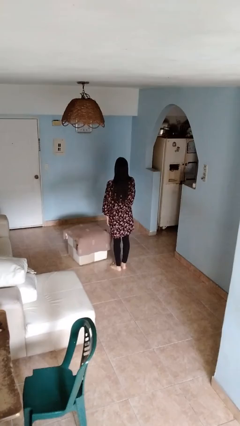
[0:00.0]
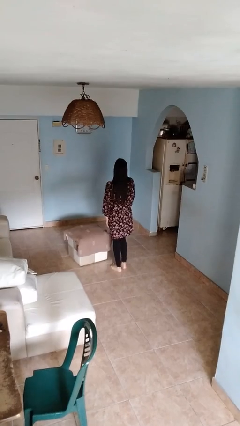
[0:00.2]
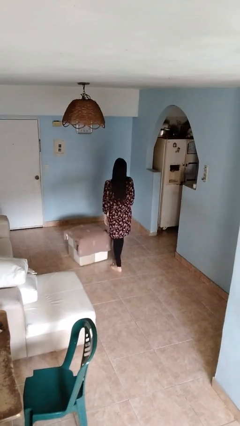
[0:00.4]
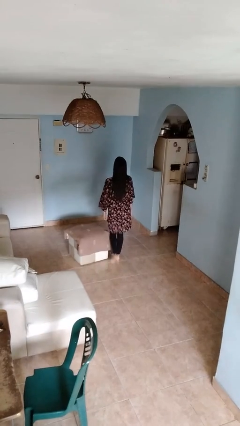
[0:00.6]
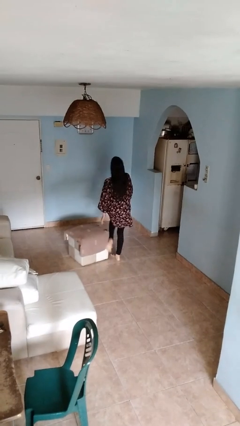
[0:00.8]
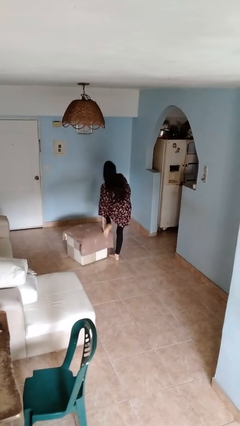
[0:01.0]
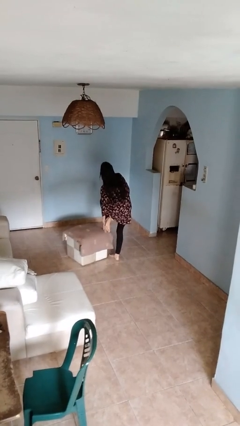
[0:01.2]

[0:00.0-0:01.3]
person stubs toe

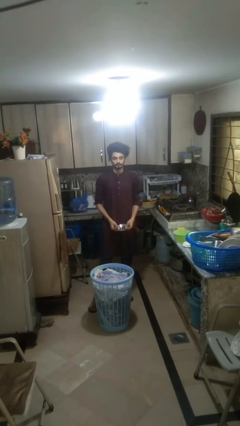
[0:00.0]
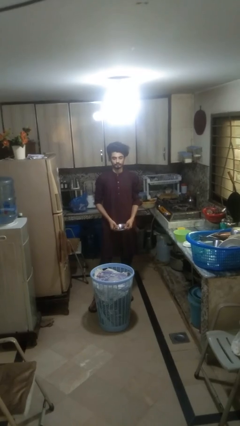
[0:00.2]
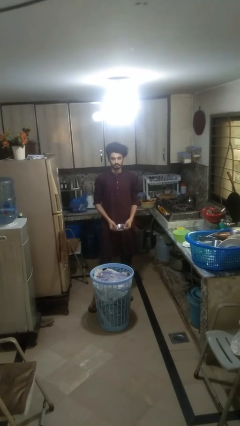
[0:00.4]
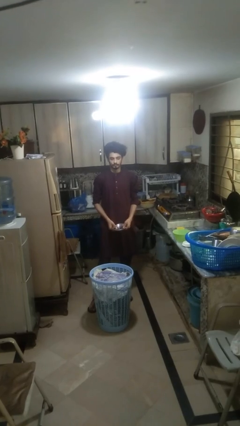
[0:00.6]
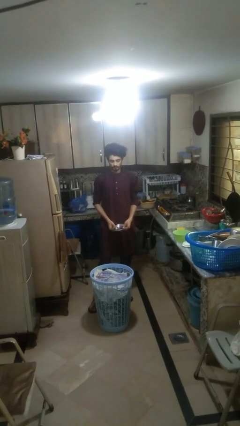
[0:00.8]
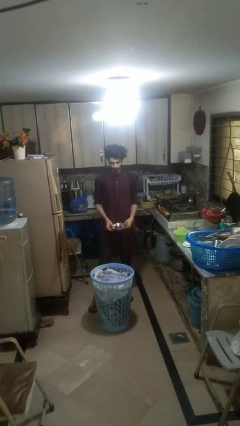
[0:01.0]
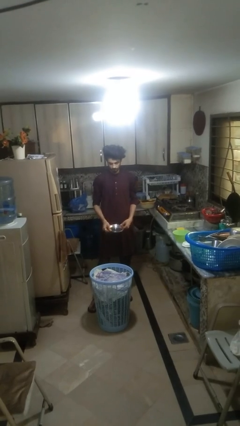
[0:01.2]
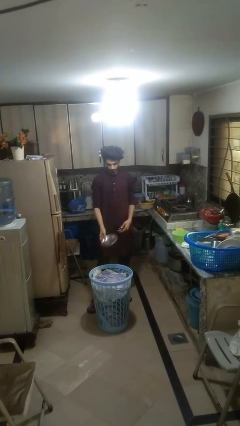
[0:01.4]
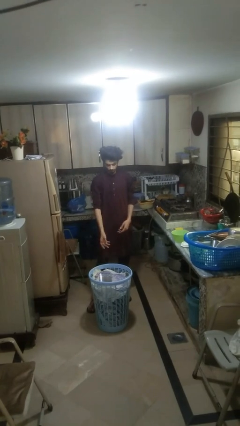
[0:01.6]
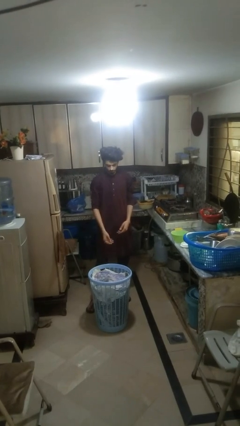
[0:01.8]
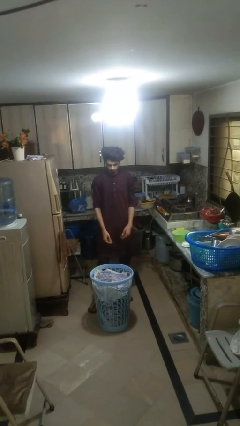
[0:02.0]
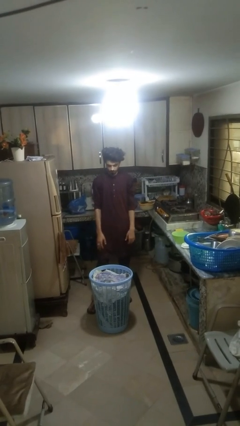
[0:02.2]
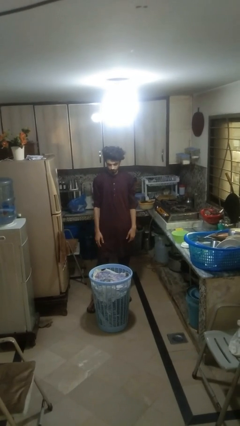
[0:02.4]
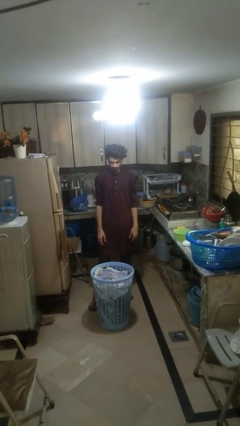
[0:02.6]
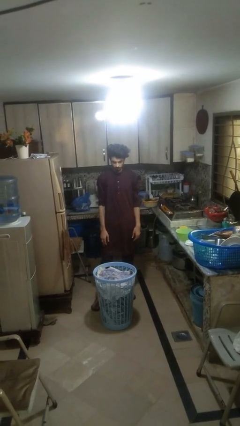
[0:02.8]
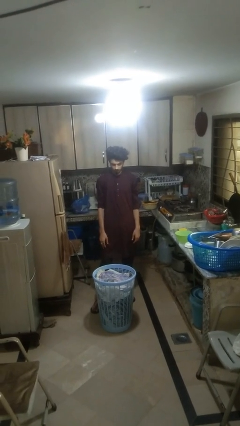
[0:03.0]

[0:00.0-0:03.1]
person puts object into basket

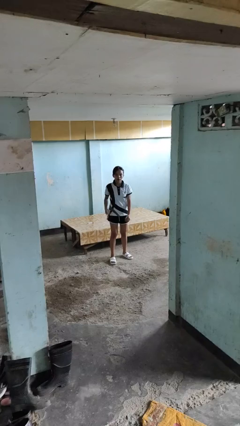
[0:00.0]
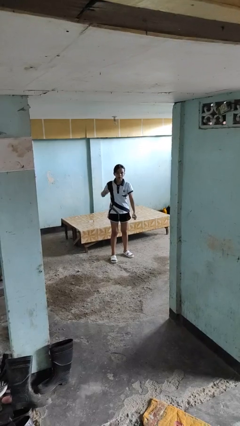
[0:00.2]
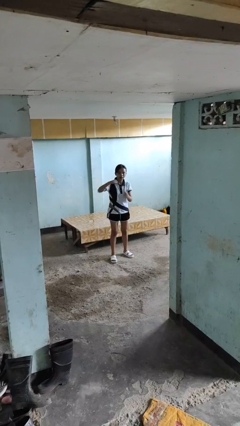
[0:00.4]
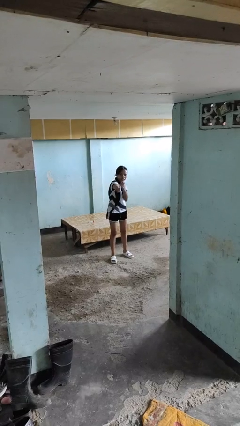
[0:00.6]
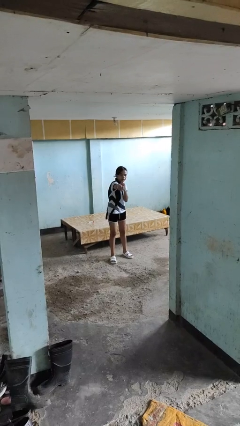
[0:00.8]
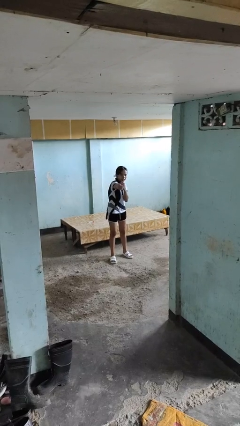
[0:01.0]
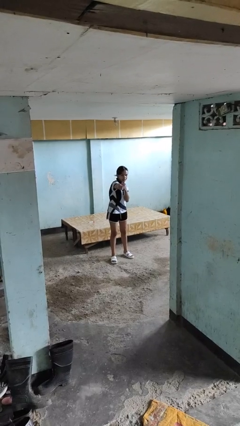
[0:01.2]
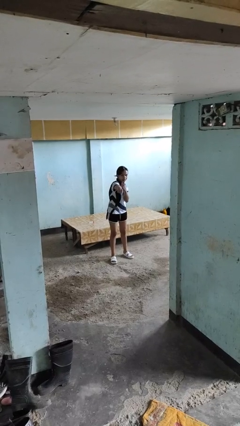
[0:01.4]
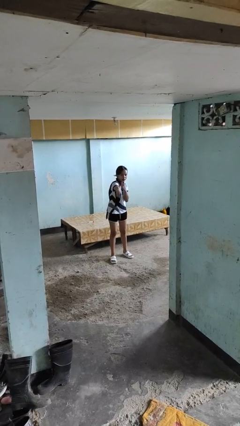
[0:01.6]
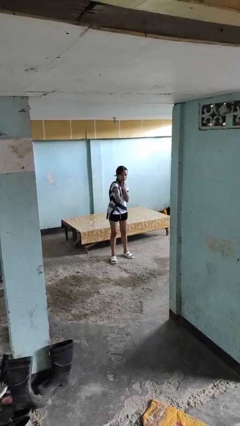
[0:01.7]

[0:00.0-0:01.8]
person punches

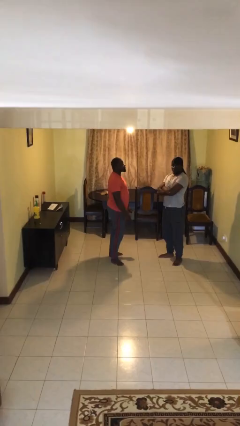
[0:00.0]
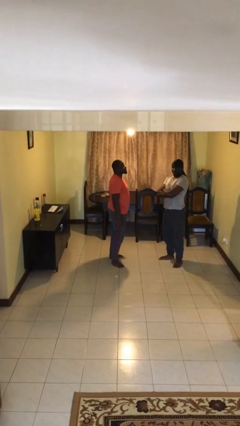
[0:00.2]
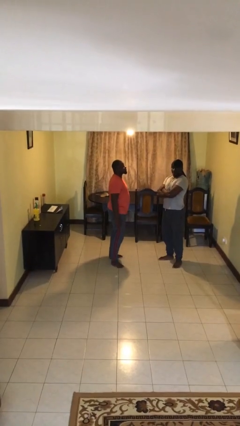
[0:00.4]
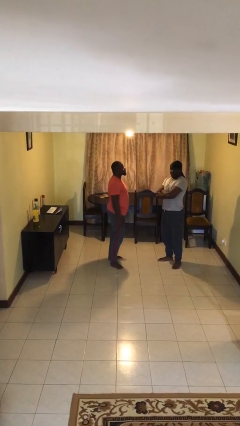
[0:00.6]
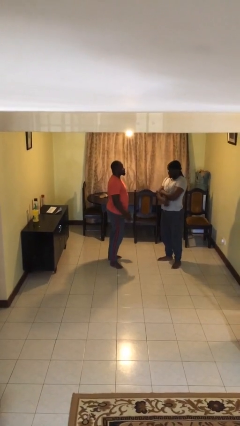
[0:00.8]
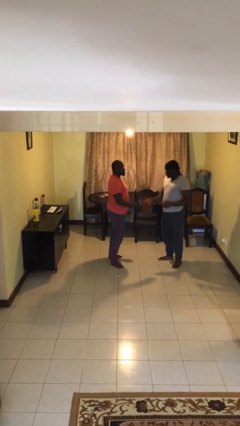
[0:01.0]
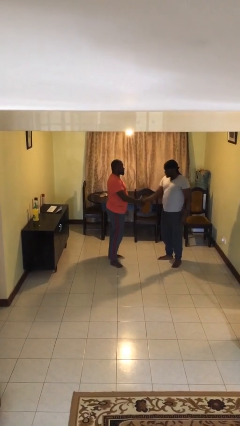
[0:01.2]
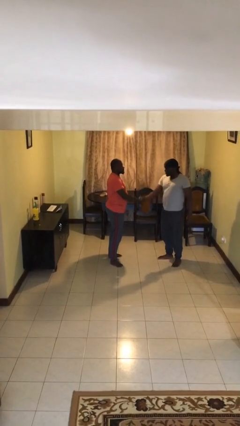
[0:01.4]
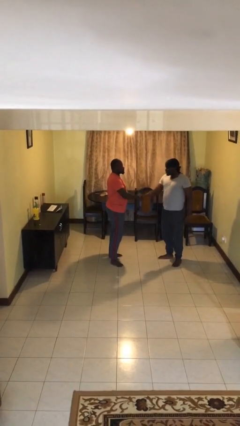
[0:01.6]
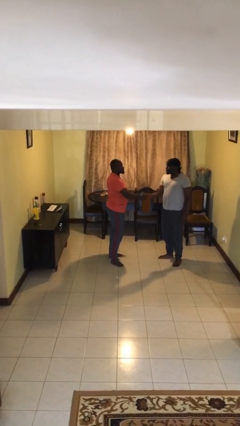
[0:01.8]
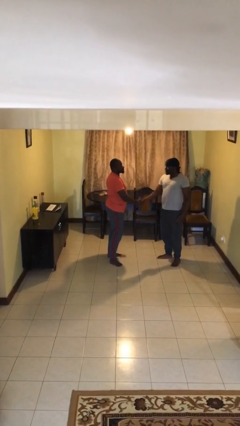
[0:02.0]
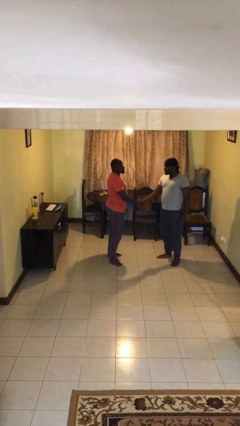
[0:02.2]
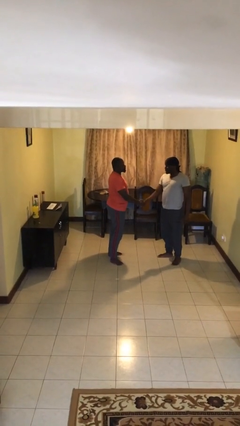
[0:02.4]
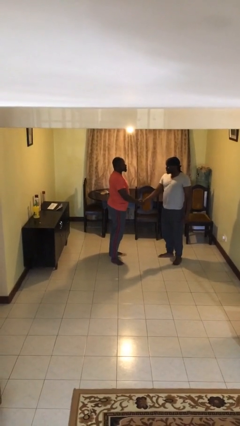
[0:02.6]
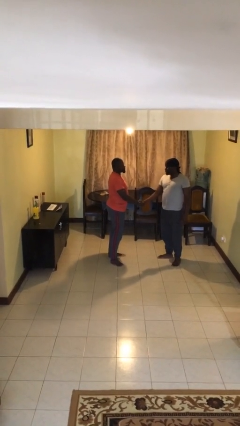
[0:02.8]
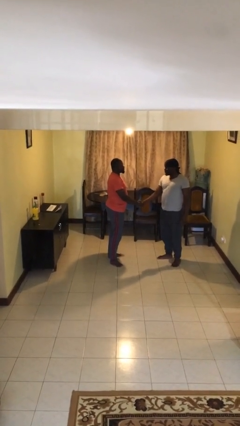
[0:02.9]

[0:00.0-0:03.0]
person shakes hand

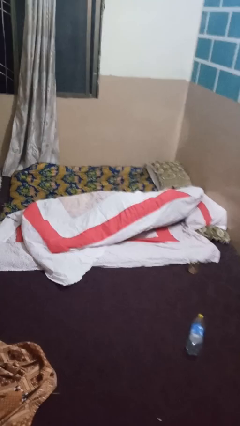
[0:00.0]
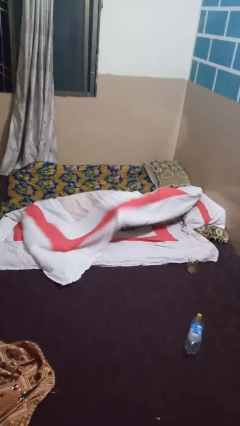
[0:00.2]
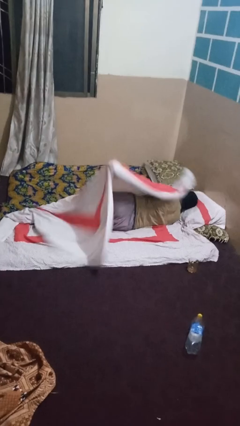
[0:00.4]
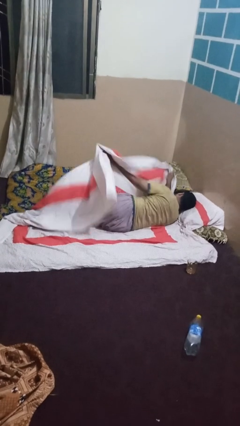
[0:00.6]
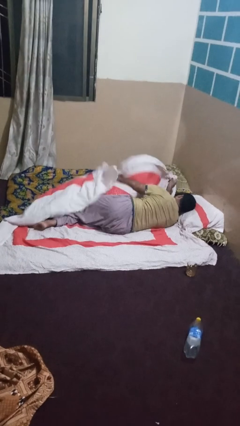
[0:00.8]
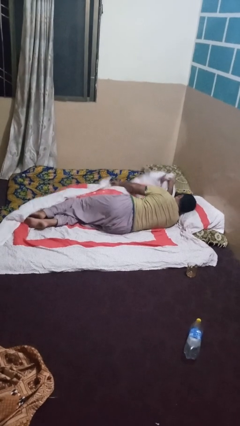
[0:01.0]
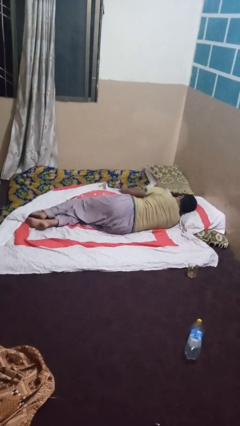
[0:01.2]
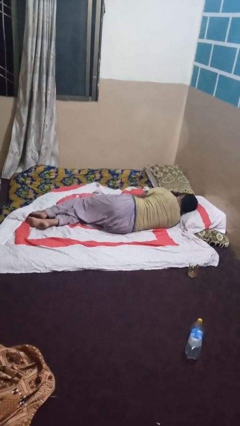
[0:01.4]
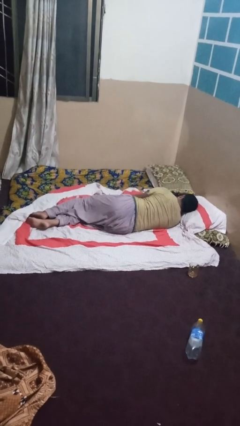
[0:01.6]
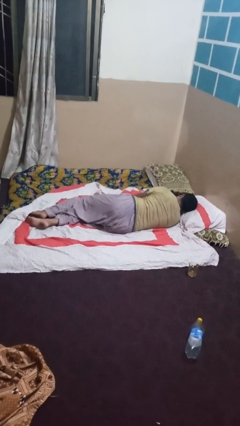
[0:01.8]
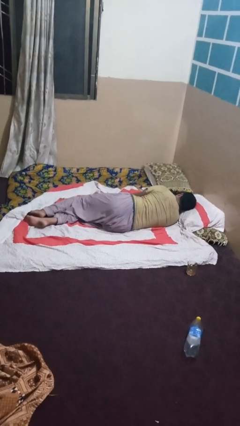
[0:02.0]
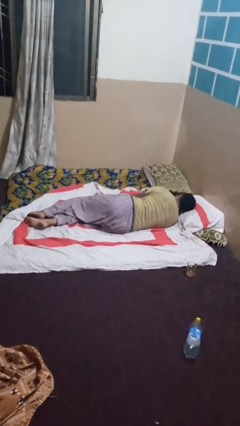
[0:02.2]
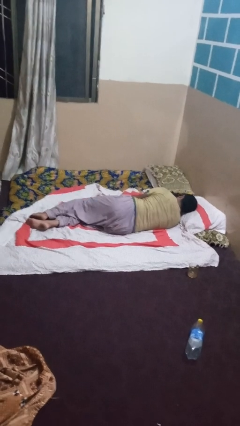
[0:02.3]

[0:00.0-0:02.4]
person uncovers with bedsheets

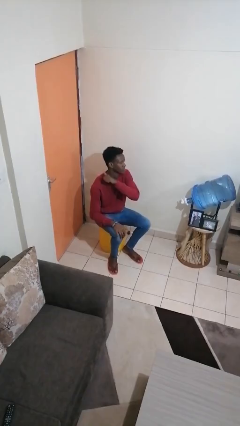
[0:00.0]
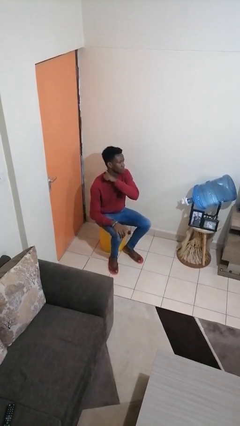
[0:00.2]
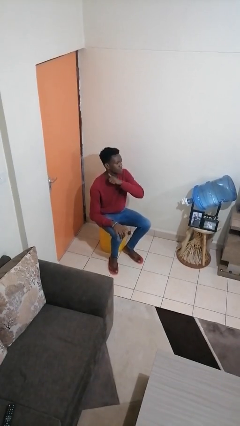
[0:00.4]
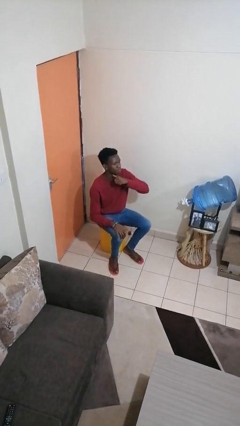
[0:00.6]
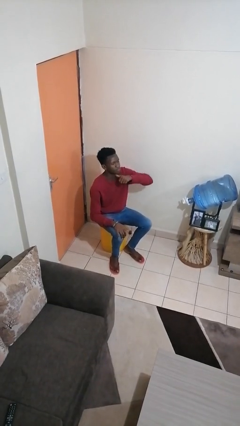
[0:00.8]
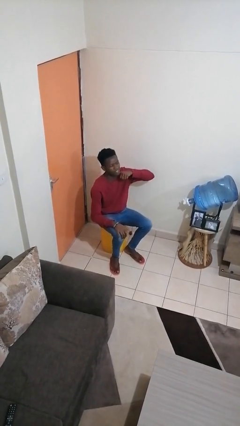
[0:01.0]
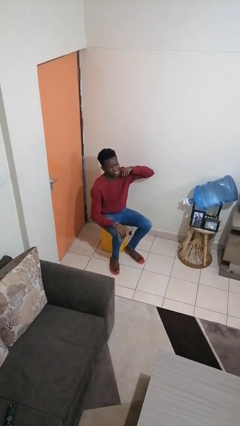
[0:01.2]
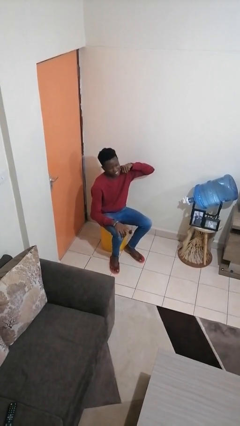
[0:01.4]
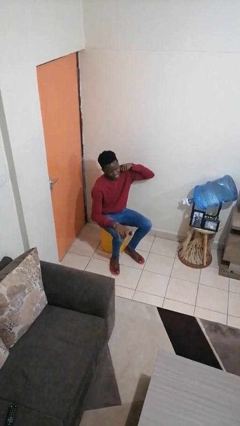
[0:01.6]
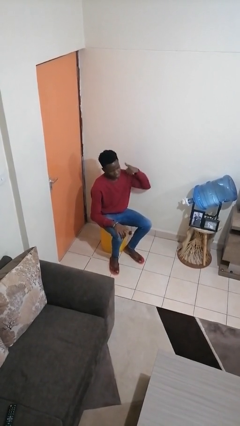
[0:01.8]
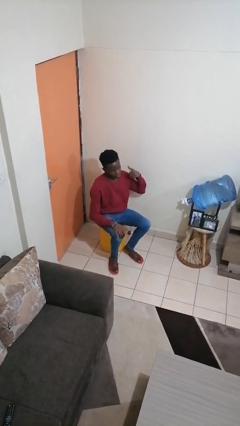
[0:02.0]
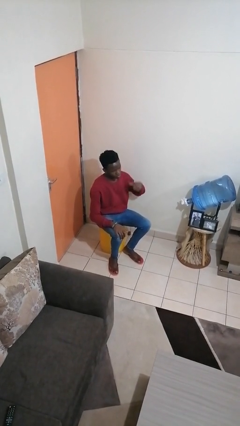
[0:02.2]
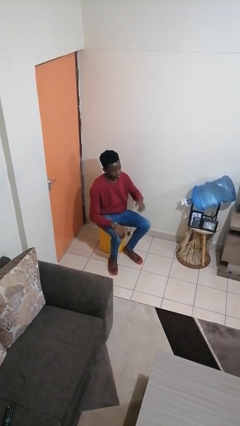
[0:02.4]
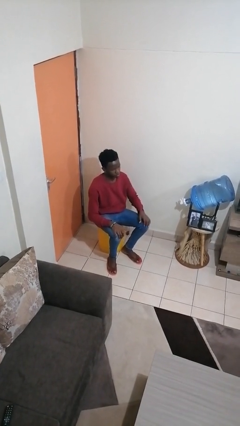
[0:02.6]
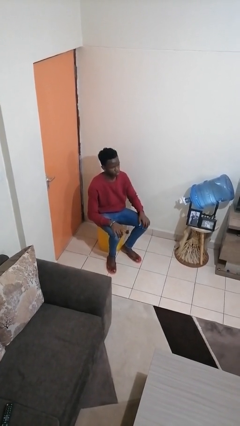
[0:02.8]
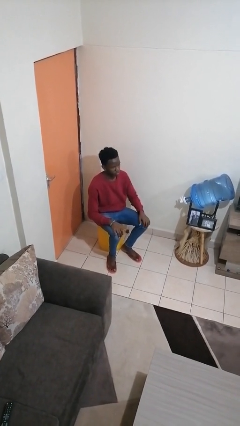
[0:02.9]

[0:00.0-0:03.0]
person gestures cut

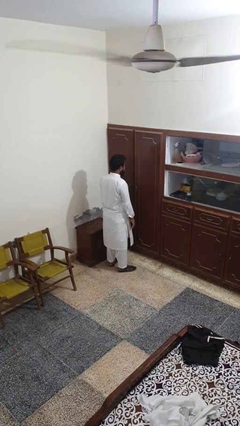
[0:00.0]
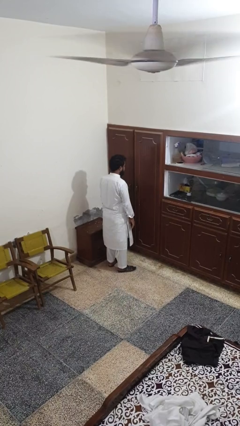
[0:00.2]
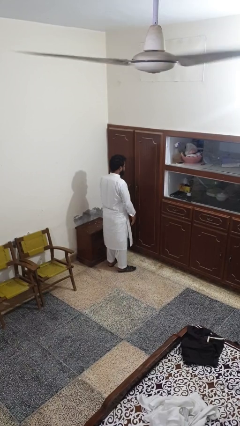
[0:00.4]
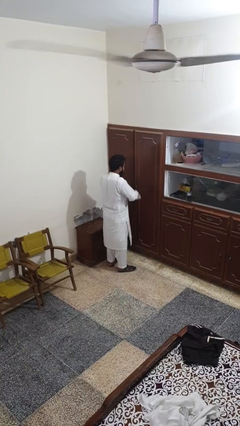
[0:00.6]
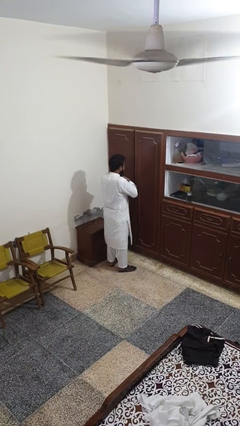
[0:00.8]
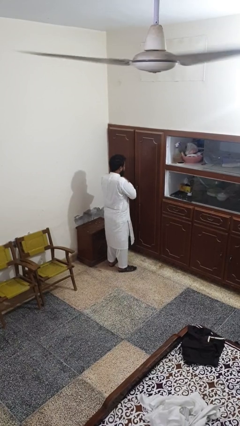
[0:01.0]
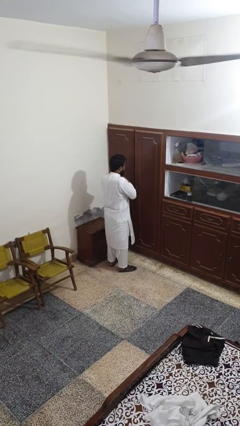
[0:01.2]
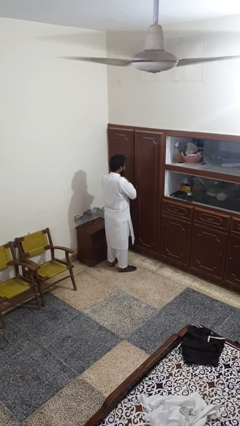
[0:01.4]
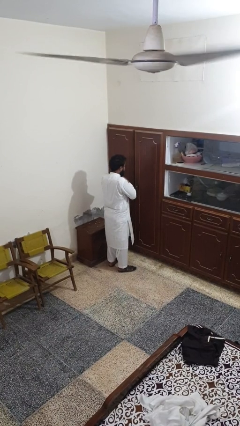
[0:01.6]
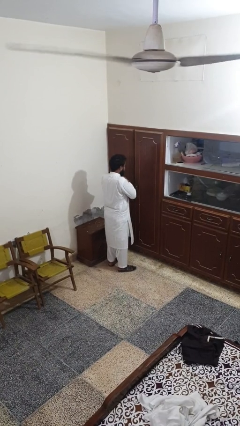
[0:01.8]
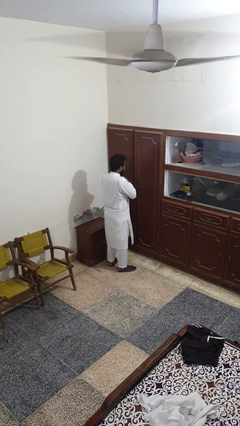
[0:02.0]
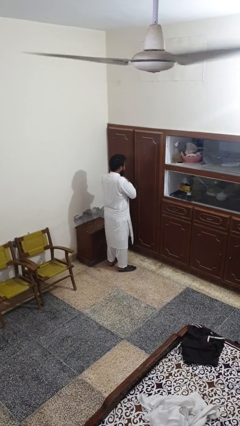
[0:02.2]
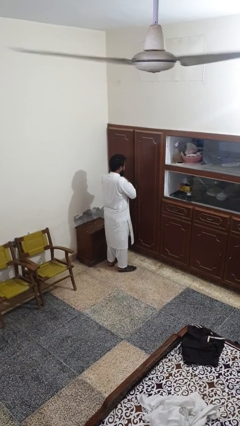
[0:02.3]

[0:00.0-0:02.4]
person prays
